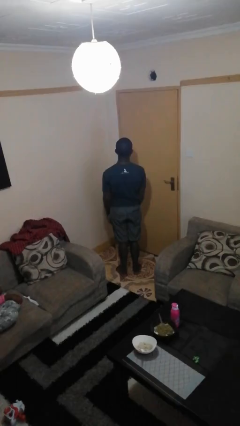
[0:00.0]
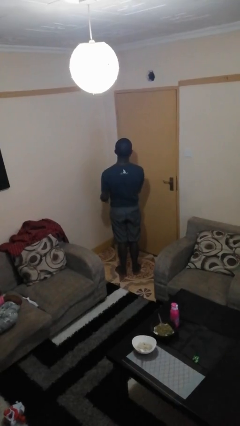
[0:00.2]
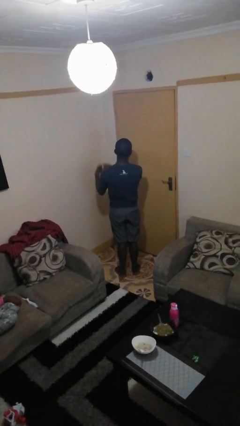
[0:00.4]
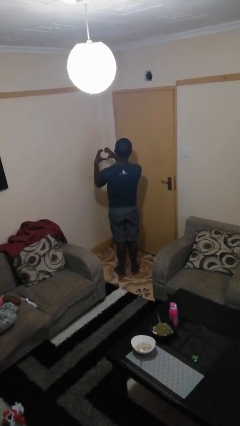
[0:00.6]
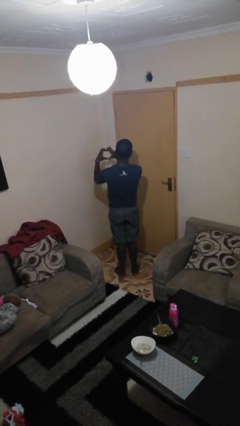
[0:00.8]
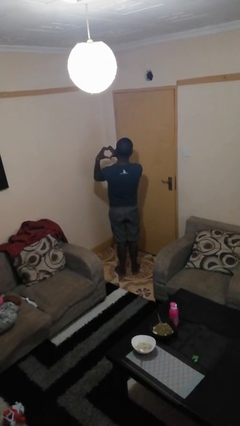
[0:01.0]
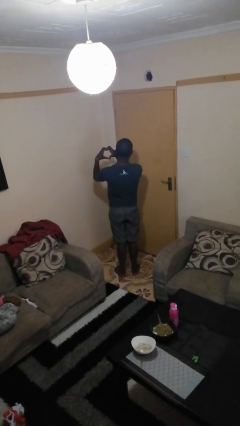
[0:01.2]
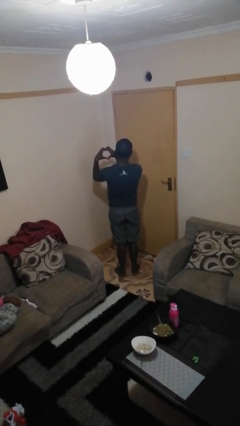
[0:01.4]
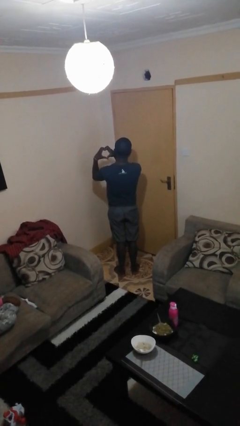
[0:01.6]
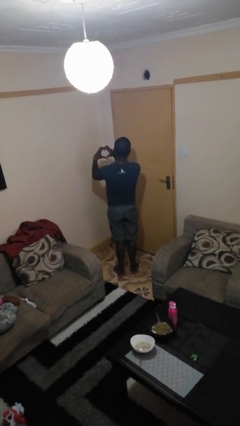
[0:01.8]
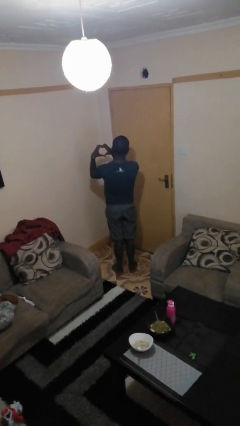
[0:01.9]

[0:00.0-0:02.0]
person gestures heart

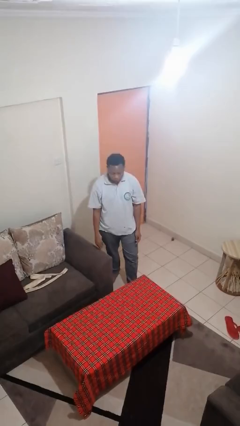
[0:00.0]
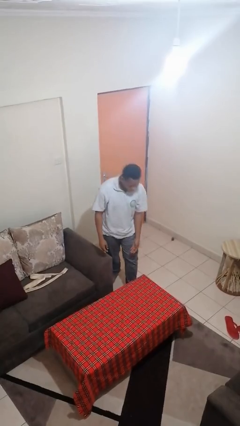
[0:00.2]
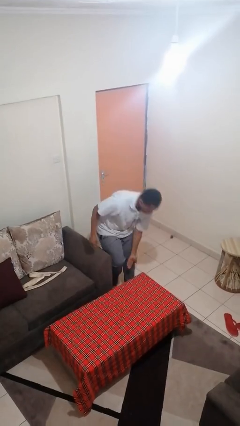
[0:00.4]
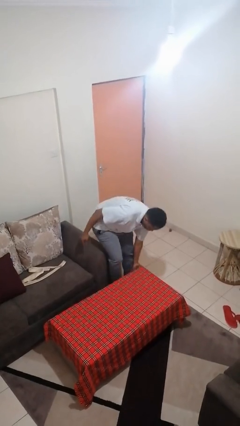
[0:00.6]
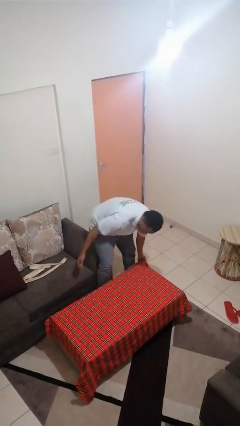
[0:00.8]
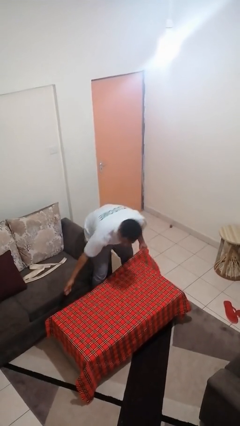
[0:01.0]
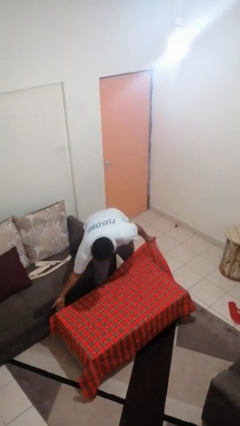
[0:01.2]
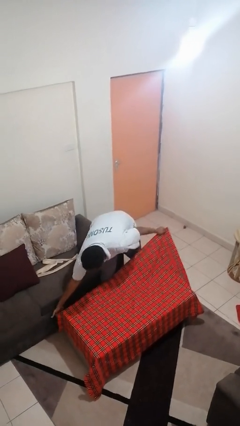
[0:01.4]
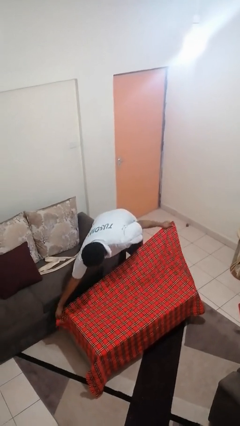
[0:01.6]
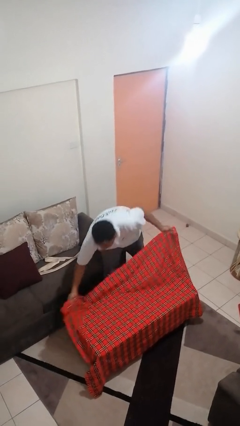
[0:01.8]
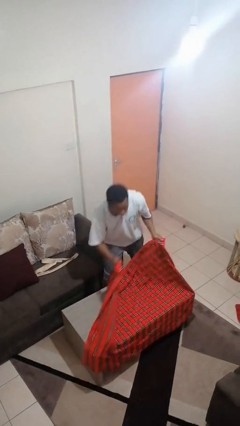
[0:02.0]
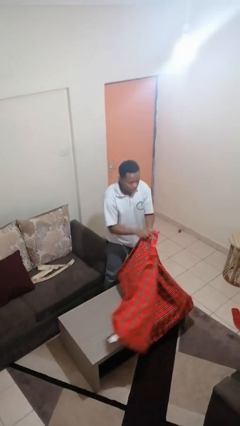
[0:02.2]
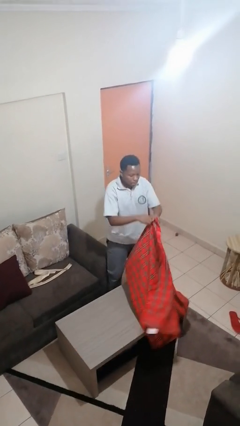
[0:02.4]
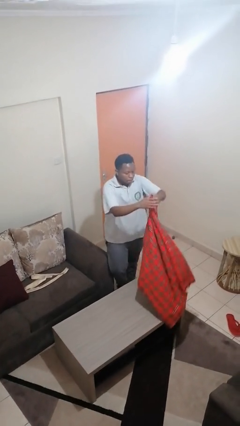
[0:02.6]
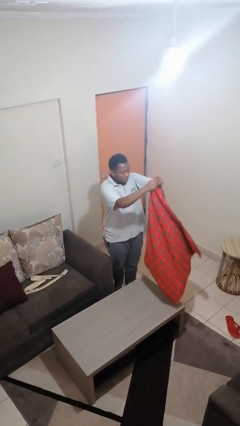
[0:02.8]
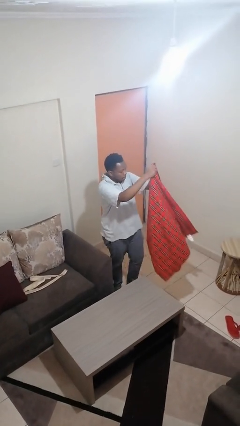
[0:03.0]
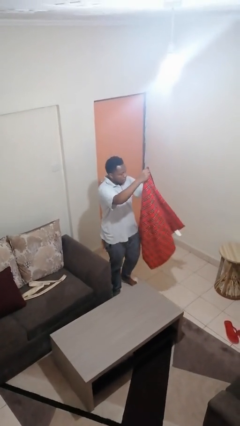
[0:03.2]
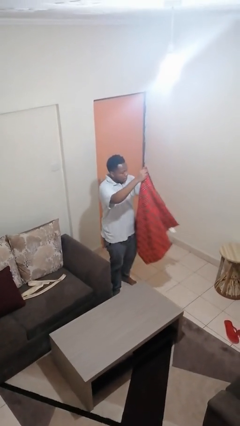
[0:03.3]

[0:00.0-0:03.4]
person folds tablecloth

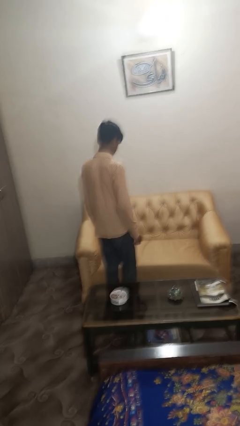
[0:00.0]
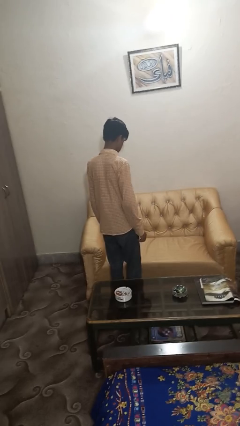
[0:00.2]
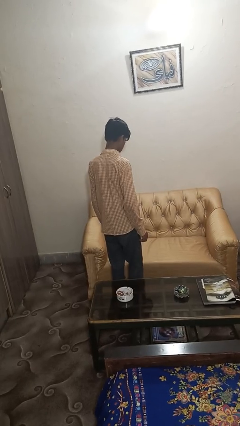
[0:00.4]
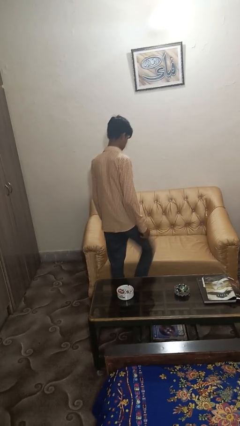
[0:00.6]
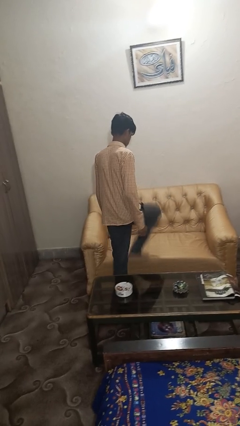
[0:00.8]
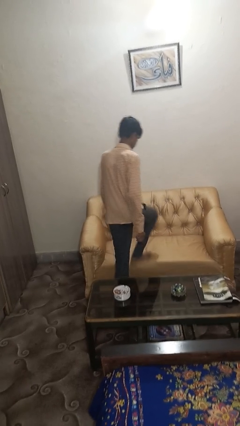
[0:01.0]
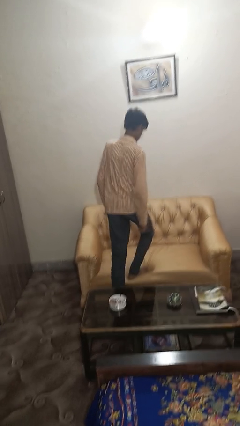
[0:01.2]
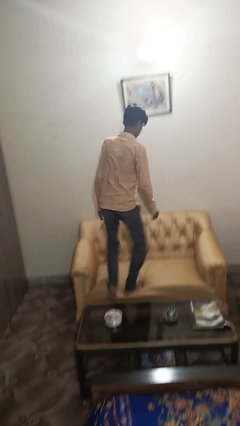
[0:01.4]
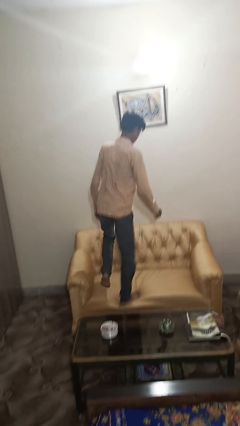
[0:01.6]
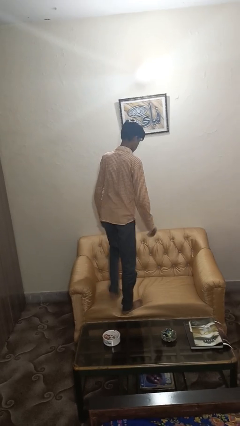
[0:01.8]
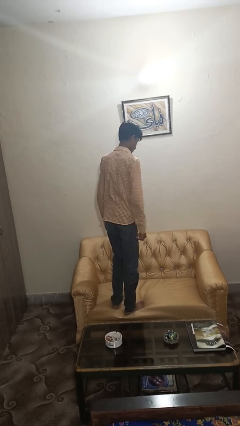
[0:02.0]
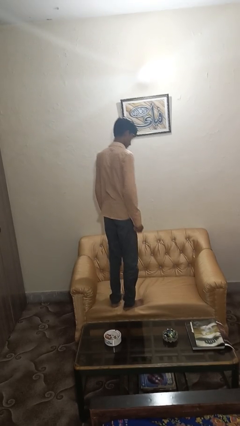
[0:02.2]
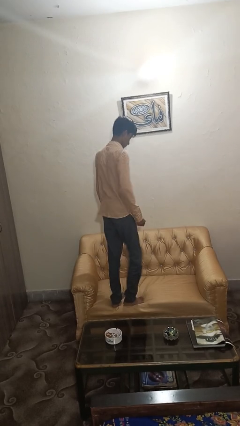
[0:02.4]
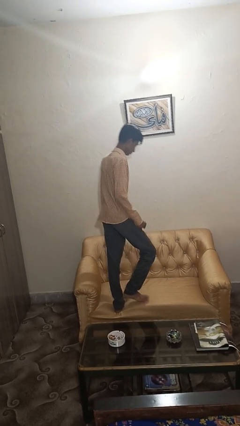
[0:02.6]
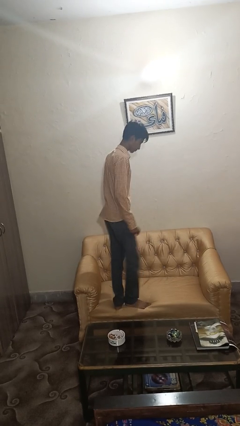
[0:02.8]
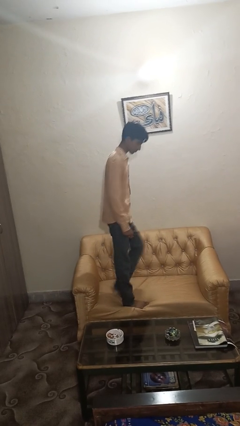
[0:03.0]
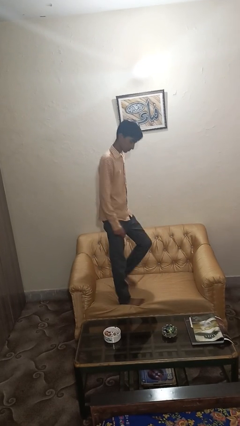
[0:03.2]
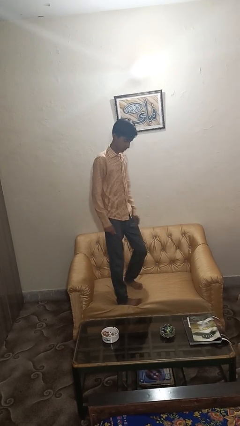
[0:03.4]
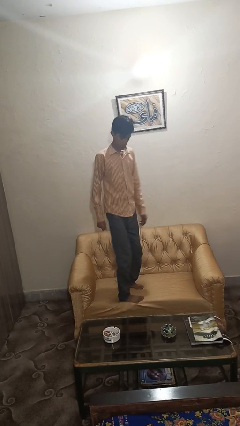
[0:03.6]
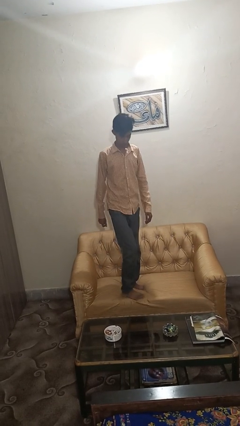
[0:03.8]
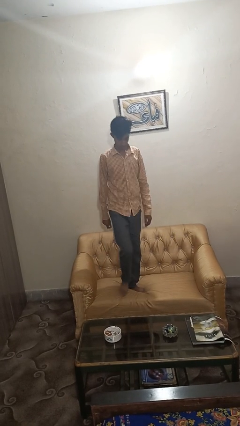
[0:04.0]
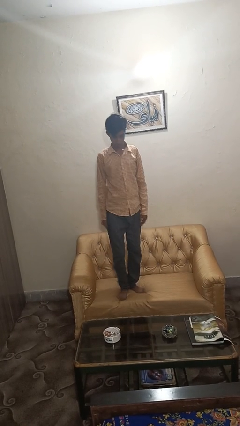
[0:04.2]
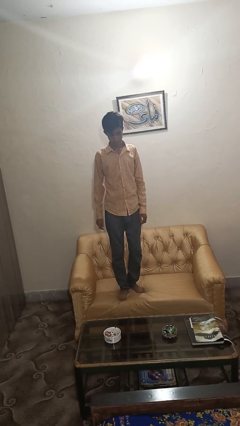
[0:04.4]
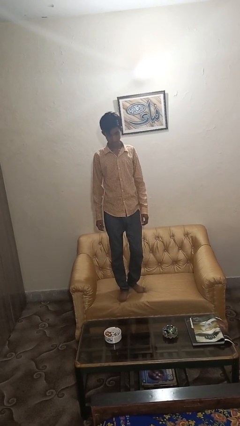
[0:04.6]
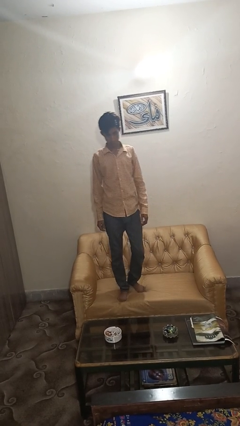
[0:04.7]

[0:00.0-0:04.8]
person climbs on couch

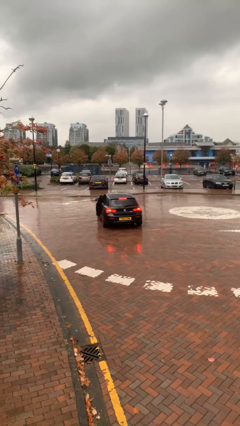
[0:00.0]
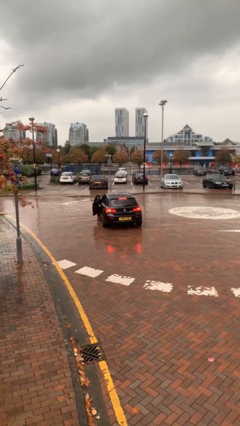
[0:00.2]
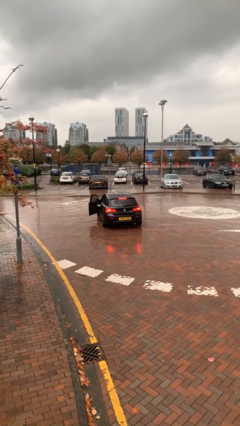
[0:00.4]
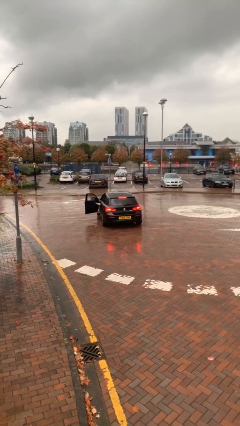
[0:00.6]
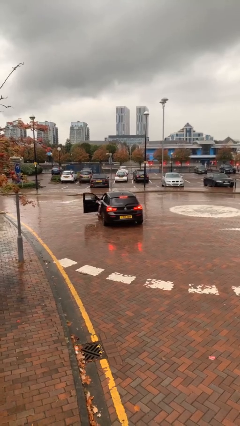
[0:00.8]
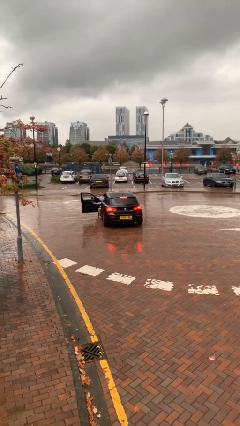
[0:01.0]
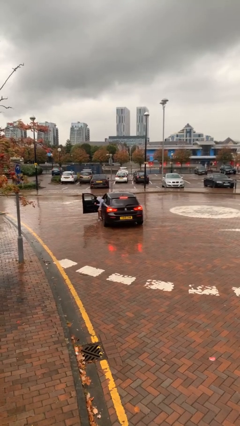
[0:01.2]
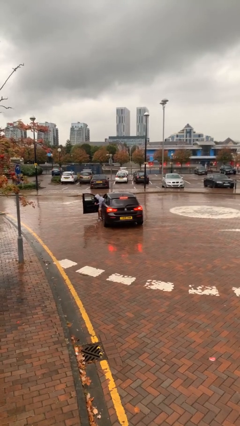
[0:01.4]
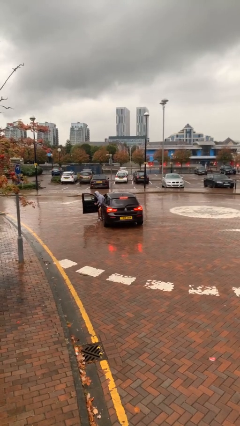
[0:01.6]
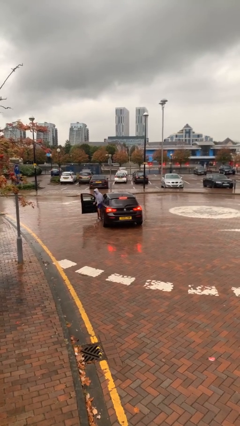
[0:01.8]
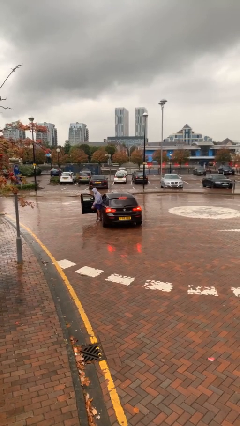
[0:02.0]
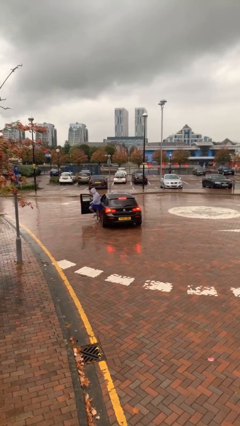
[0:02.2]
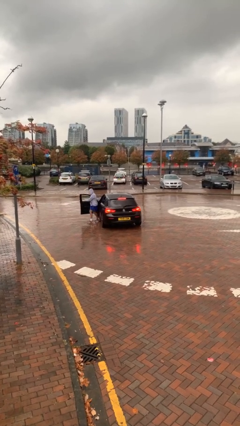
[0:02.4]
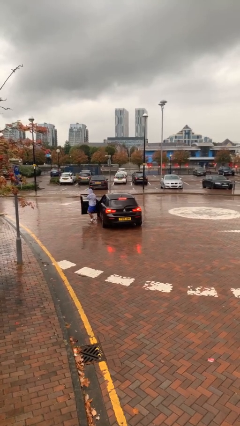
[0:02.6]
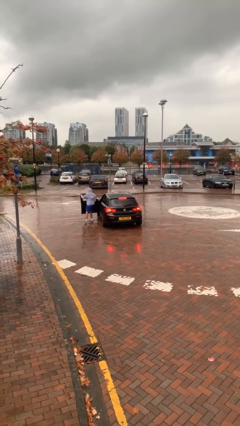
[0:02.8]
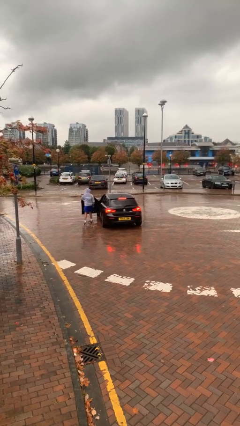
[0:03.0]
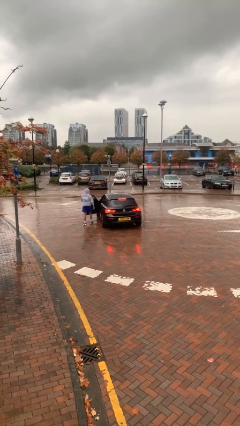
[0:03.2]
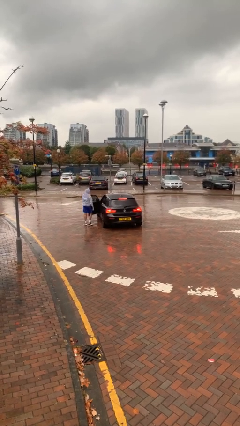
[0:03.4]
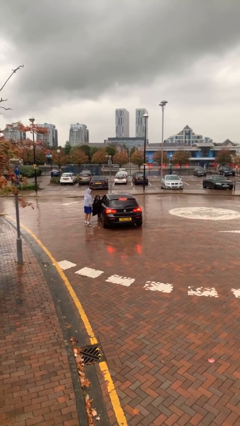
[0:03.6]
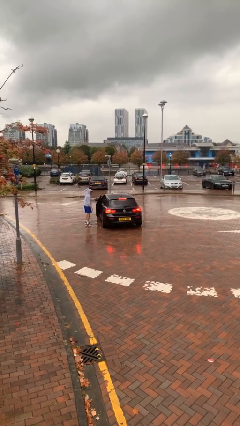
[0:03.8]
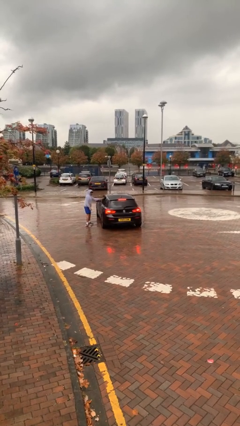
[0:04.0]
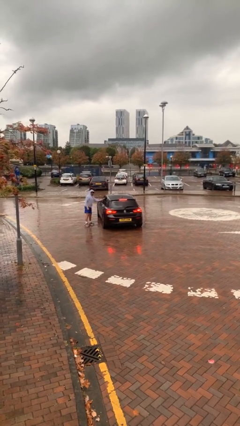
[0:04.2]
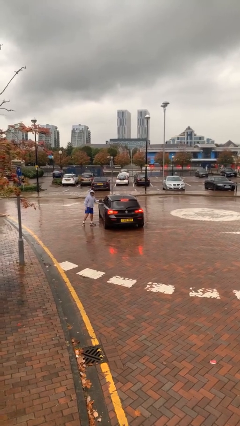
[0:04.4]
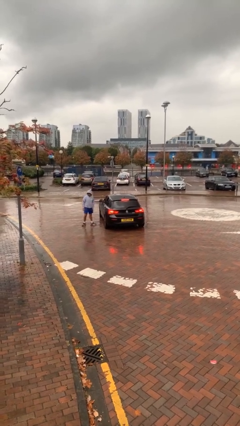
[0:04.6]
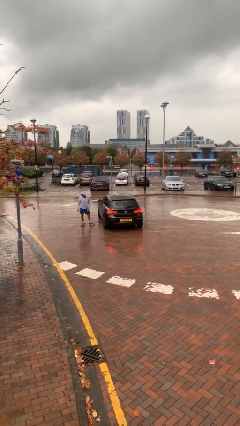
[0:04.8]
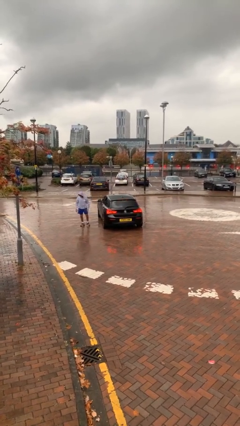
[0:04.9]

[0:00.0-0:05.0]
car drops off person

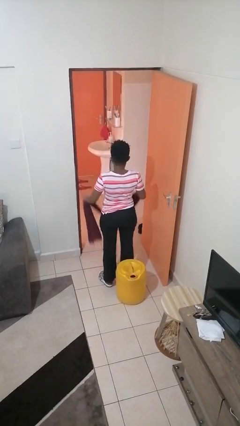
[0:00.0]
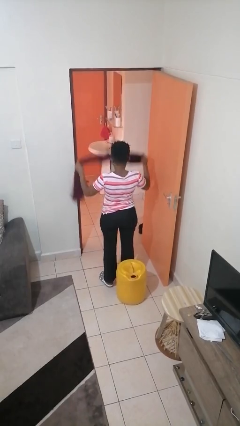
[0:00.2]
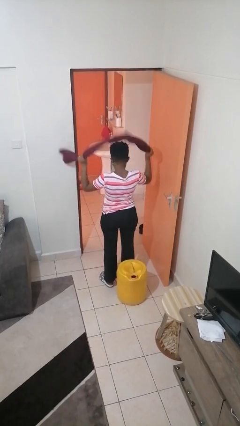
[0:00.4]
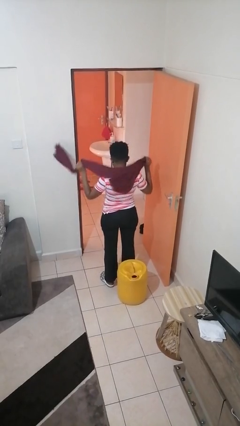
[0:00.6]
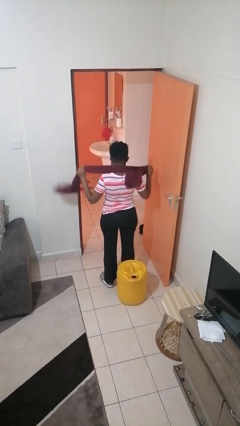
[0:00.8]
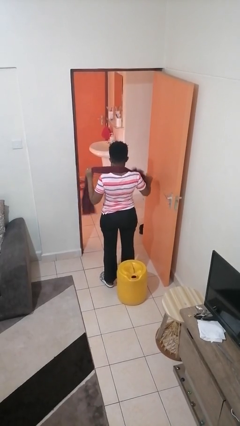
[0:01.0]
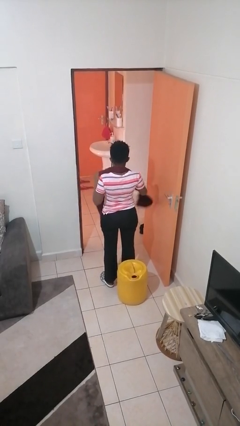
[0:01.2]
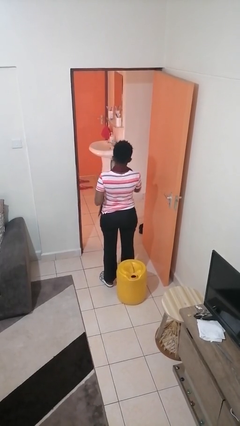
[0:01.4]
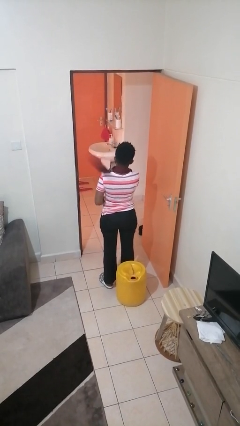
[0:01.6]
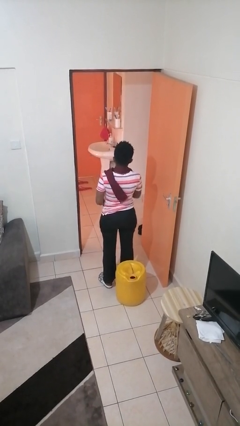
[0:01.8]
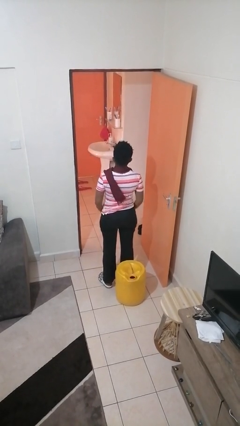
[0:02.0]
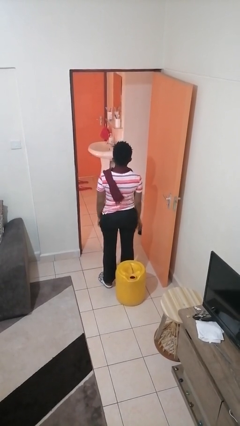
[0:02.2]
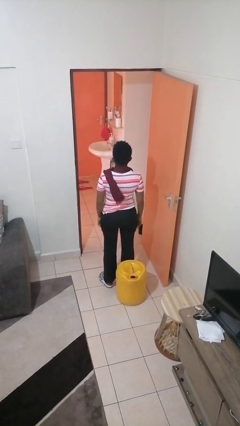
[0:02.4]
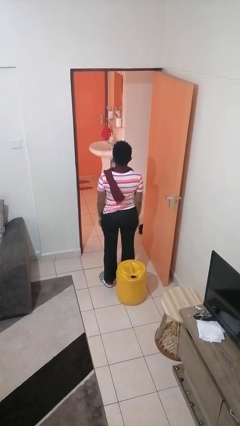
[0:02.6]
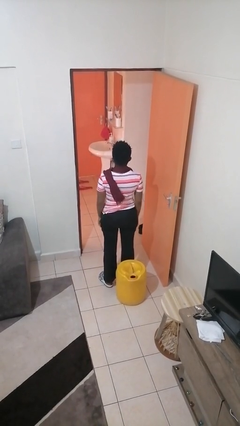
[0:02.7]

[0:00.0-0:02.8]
person puts on scarf
